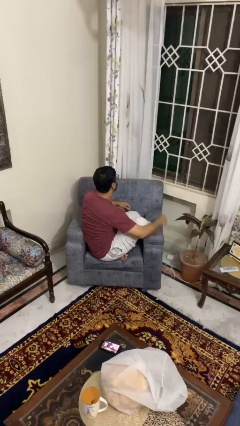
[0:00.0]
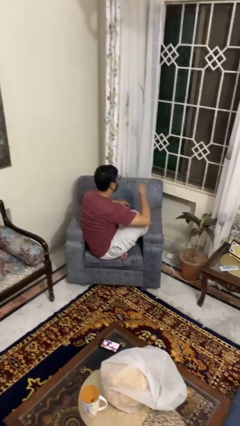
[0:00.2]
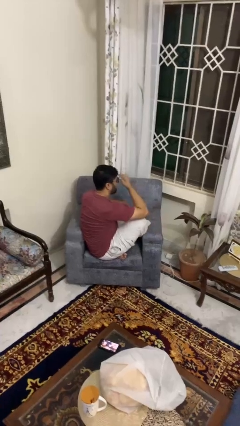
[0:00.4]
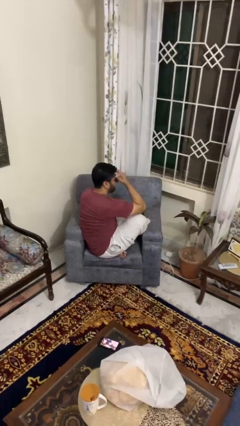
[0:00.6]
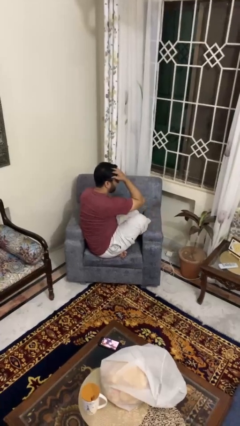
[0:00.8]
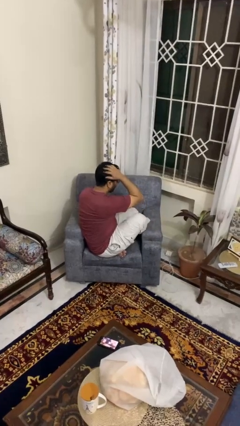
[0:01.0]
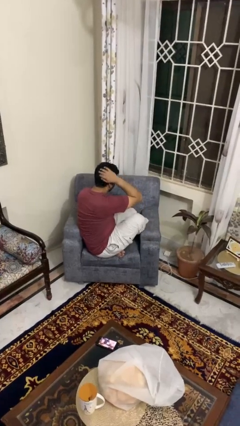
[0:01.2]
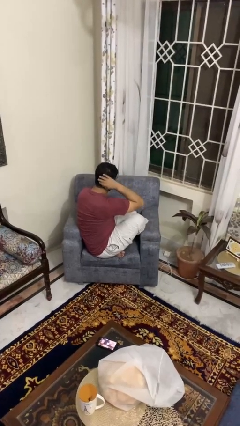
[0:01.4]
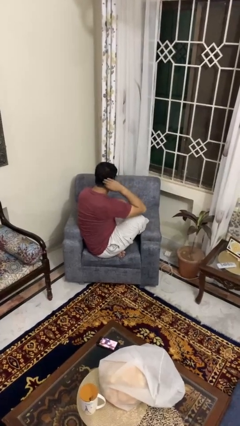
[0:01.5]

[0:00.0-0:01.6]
person strokes hair

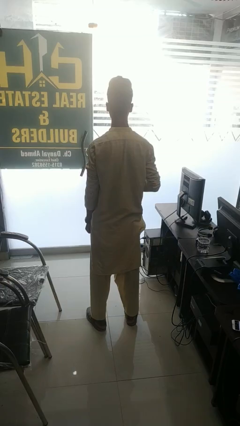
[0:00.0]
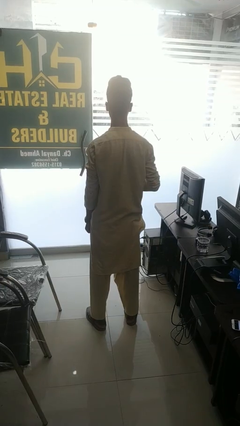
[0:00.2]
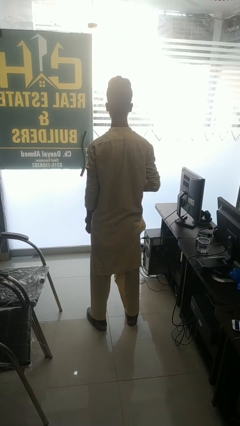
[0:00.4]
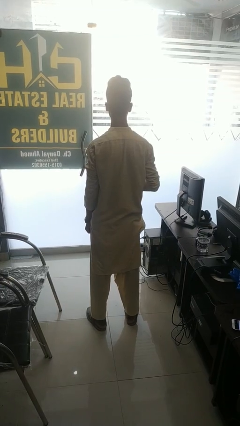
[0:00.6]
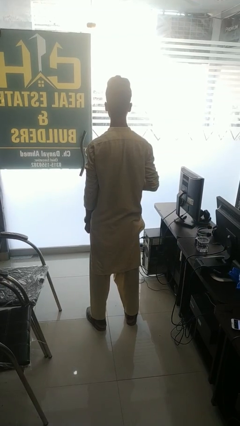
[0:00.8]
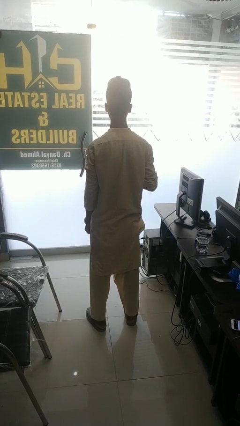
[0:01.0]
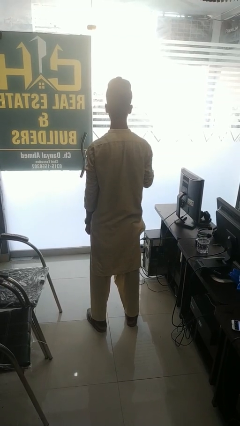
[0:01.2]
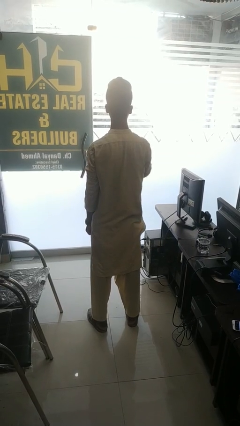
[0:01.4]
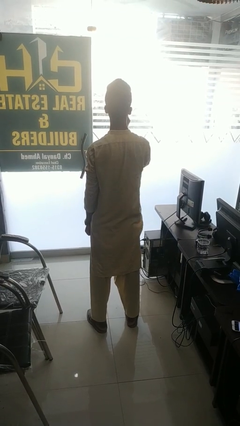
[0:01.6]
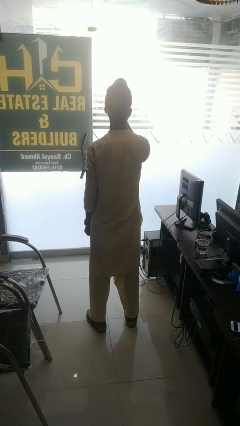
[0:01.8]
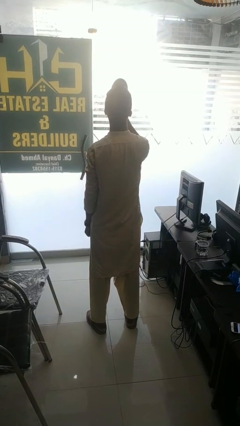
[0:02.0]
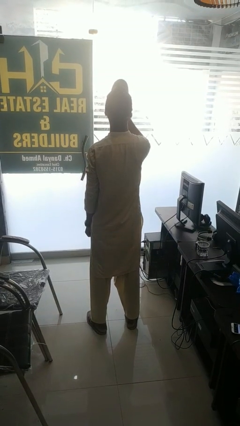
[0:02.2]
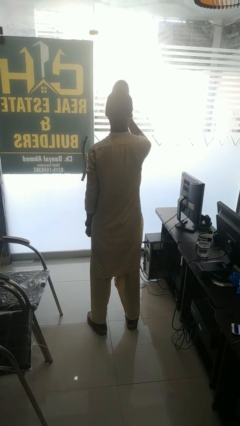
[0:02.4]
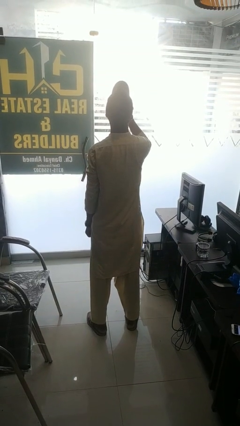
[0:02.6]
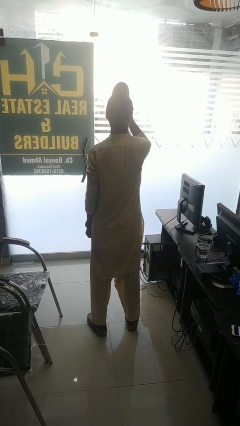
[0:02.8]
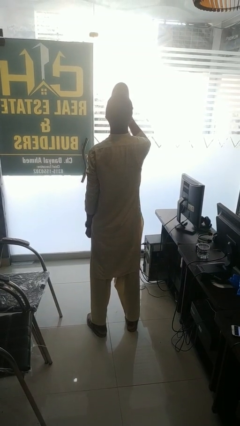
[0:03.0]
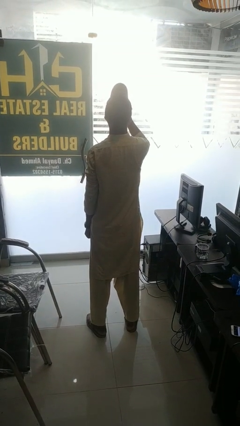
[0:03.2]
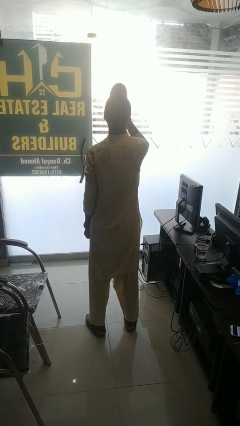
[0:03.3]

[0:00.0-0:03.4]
person drinks from bottle

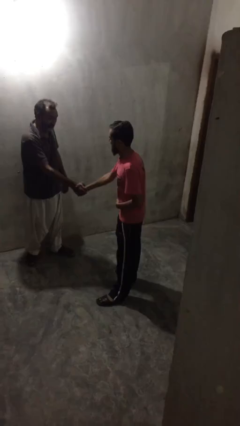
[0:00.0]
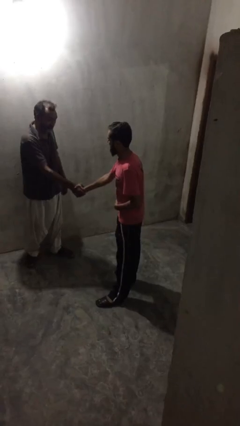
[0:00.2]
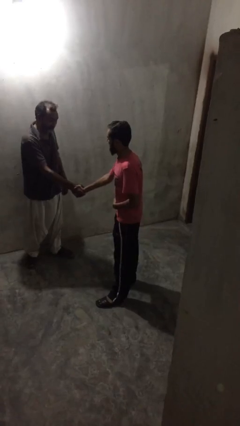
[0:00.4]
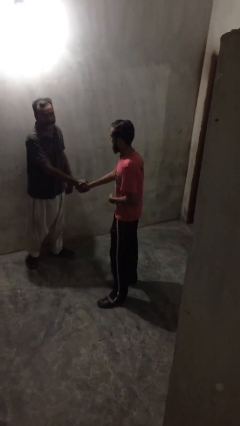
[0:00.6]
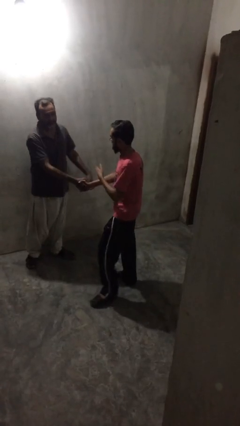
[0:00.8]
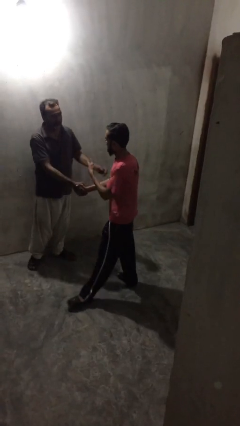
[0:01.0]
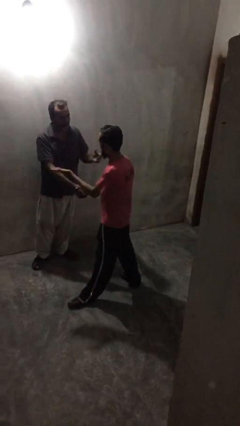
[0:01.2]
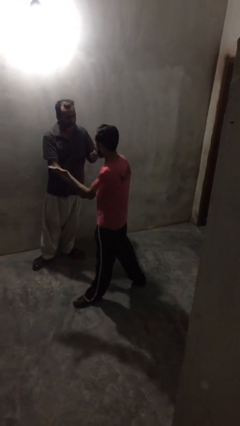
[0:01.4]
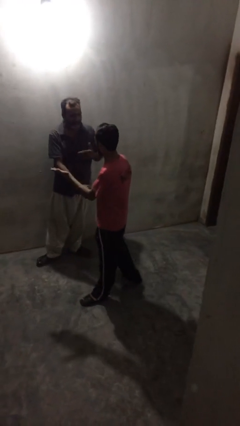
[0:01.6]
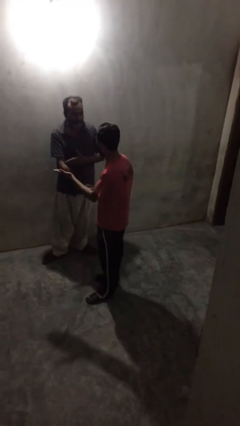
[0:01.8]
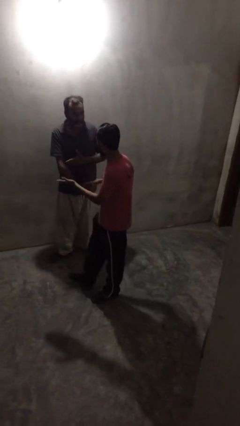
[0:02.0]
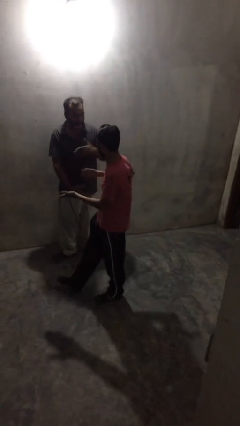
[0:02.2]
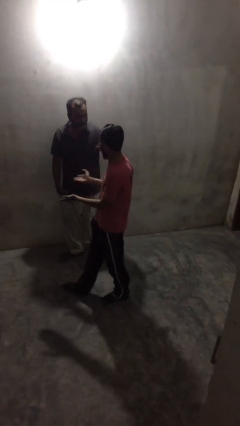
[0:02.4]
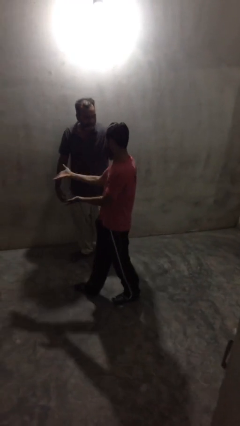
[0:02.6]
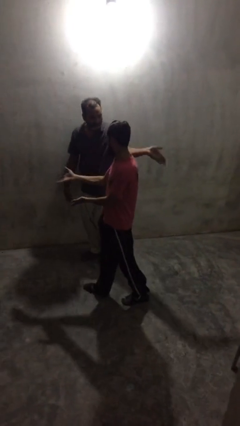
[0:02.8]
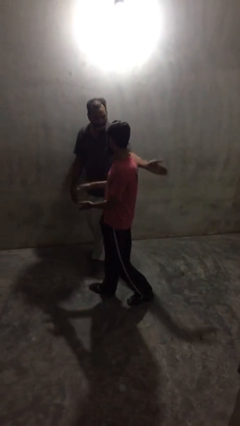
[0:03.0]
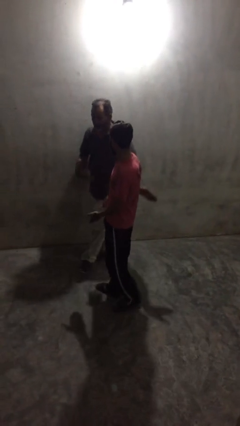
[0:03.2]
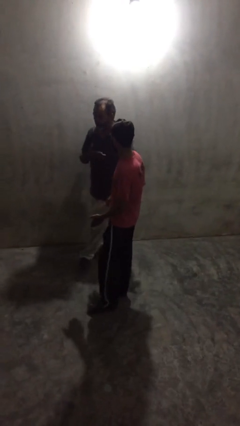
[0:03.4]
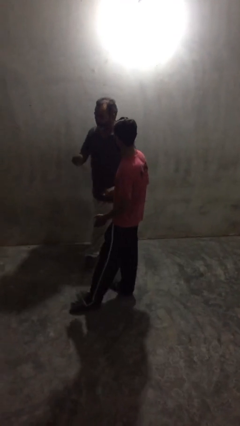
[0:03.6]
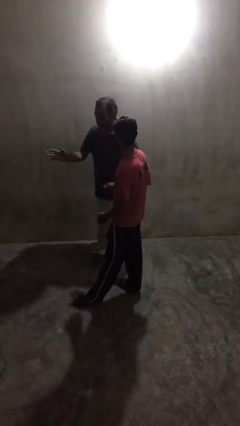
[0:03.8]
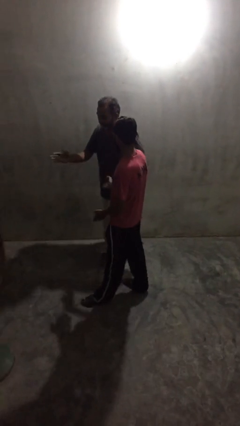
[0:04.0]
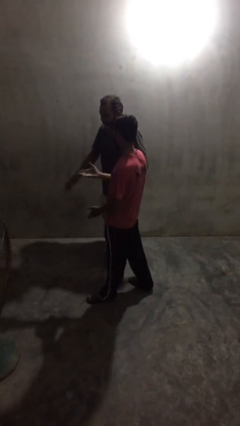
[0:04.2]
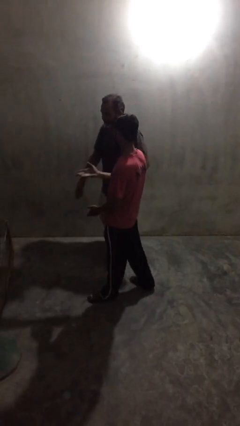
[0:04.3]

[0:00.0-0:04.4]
person talks to person

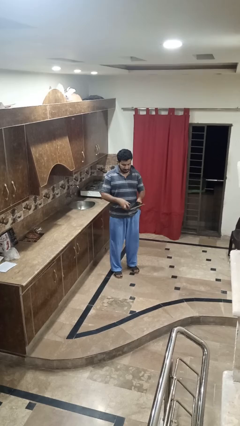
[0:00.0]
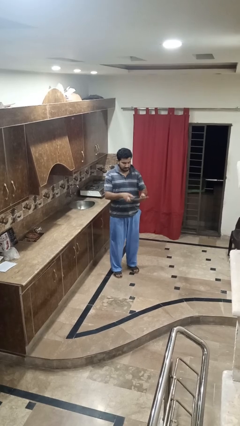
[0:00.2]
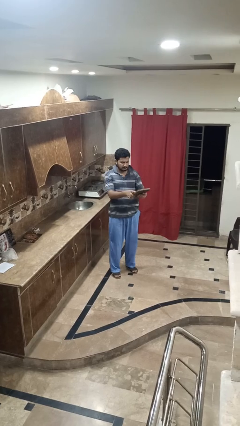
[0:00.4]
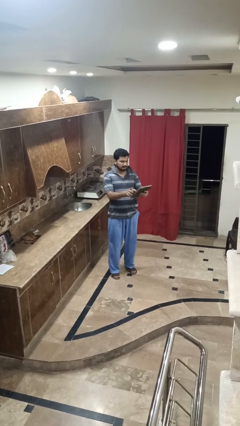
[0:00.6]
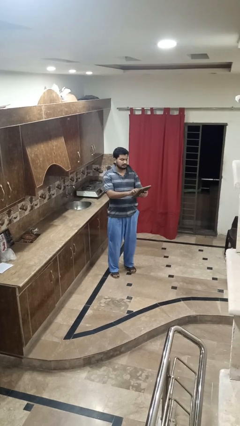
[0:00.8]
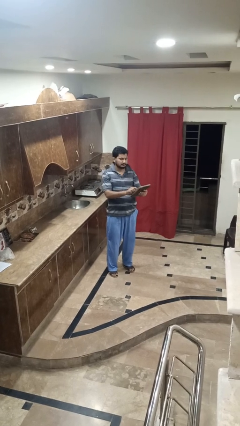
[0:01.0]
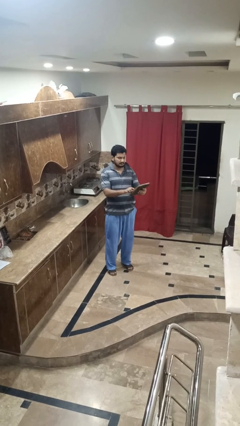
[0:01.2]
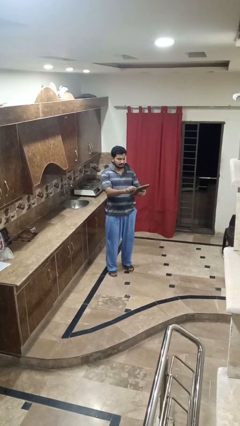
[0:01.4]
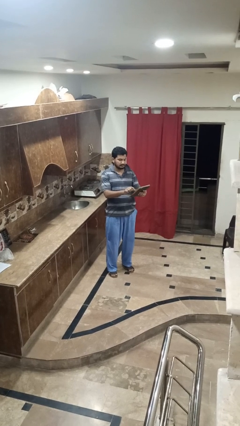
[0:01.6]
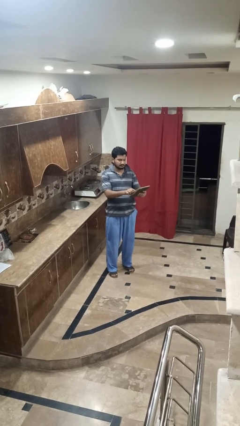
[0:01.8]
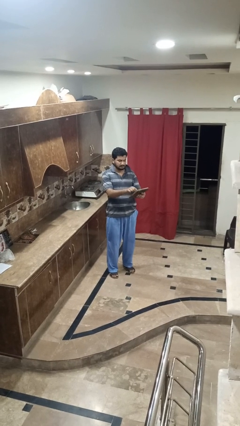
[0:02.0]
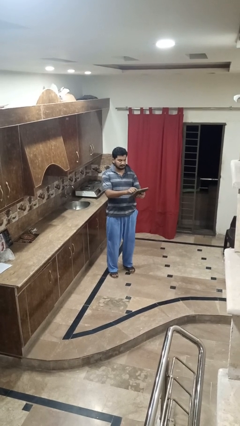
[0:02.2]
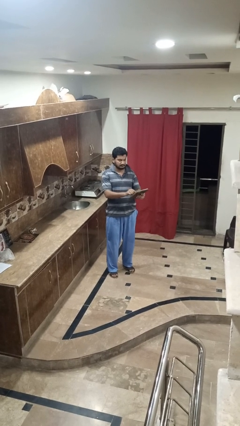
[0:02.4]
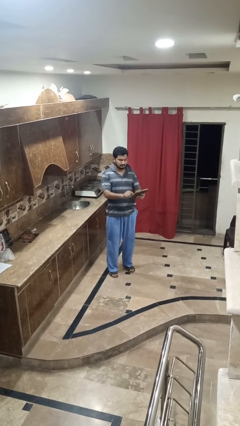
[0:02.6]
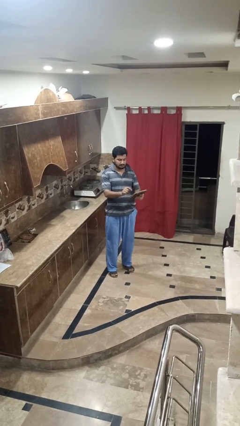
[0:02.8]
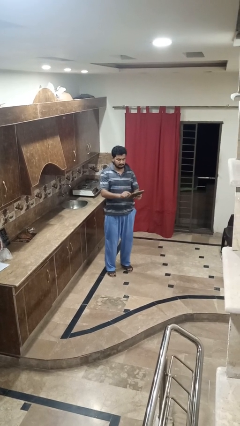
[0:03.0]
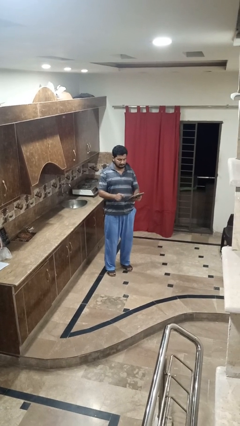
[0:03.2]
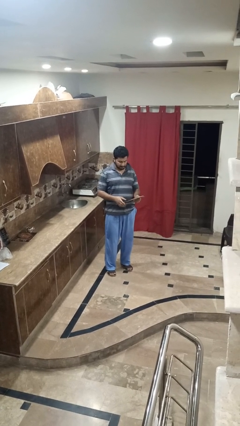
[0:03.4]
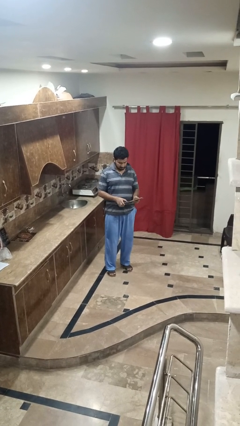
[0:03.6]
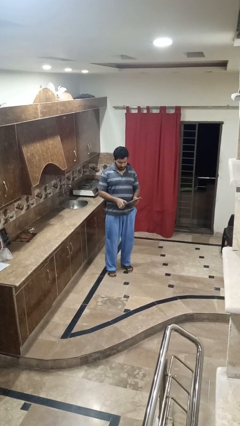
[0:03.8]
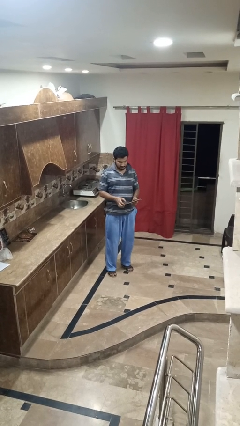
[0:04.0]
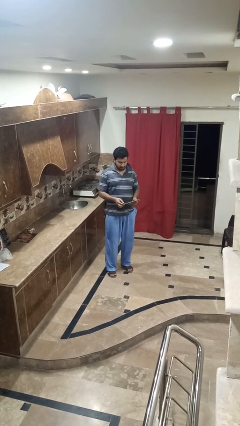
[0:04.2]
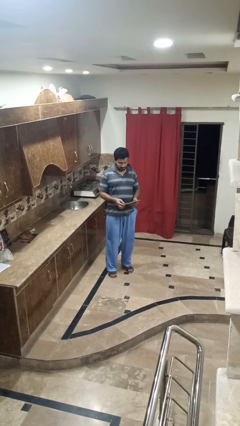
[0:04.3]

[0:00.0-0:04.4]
person interacts with tablet

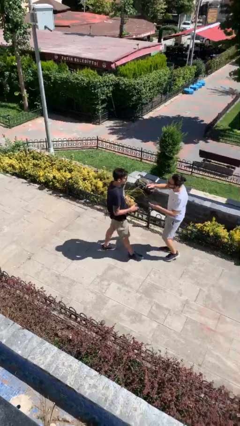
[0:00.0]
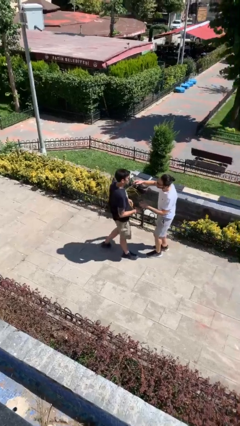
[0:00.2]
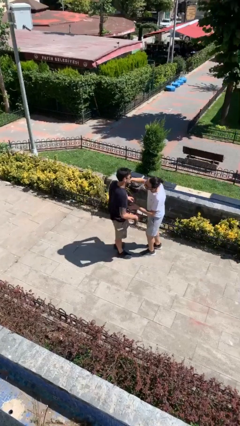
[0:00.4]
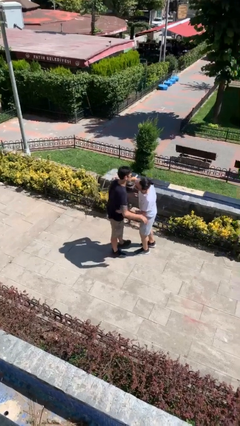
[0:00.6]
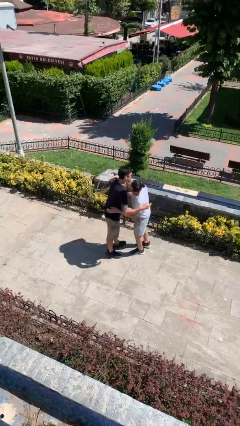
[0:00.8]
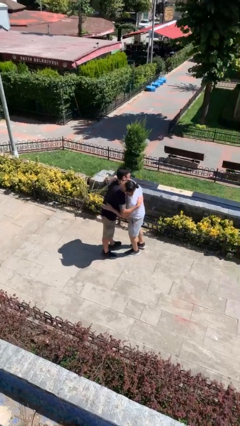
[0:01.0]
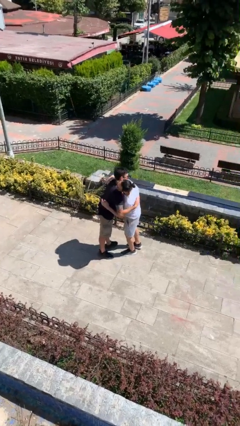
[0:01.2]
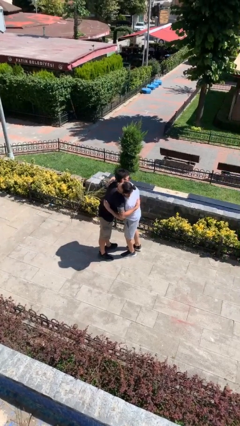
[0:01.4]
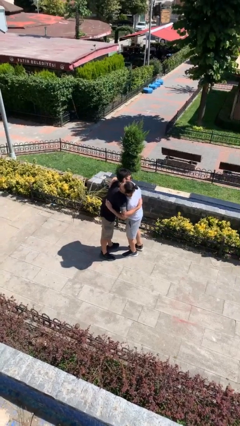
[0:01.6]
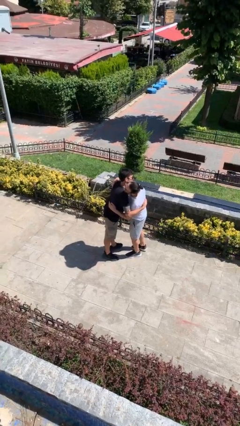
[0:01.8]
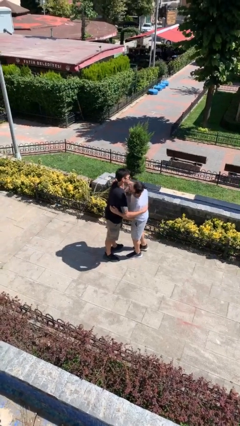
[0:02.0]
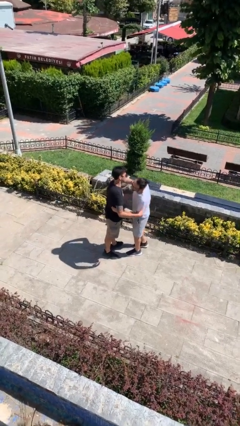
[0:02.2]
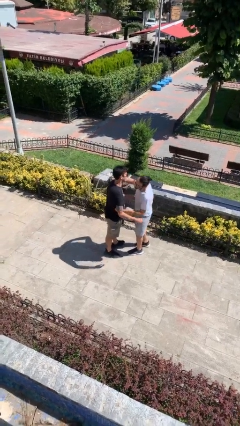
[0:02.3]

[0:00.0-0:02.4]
person embraces person

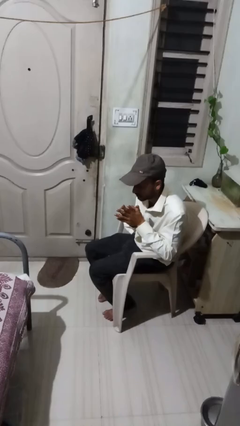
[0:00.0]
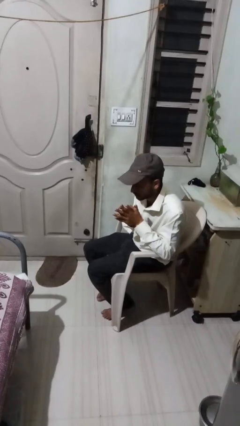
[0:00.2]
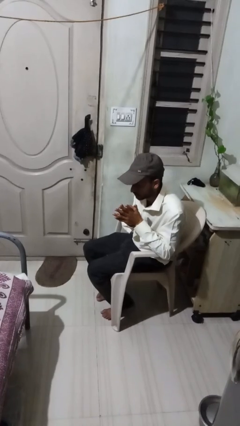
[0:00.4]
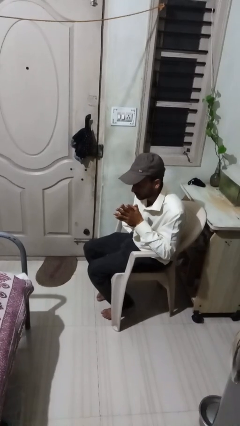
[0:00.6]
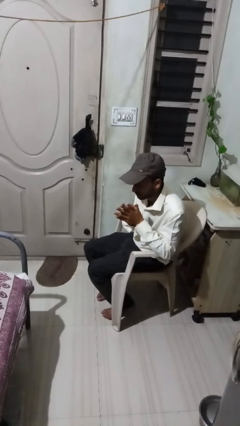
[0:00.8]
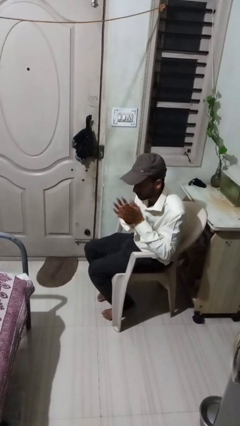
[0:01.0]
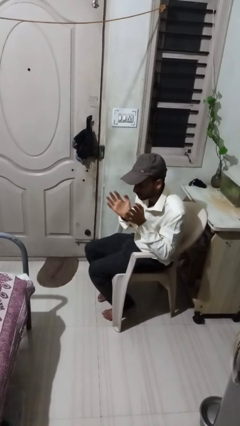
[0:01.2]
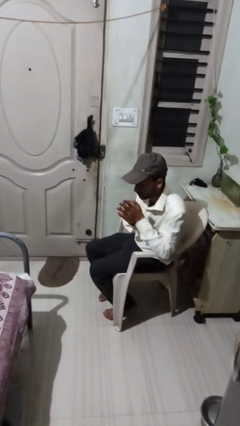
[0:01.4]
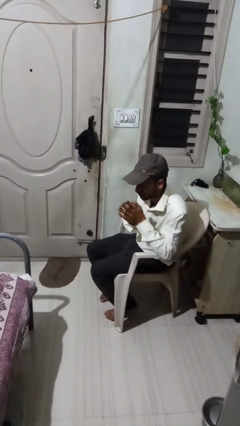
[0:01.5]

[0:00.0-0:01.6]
person claps hands
